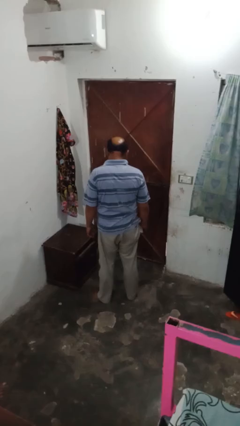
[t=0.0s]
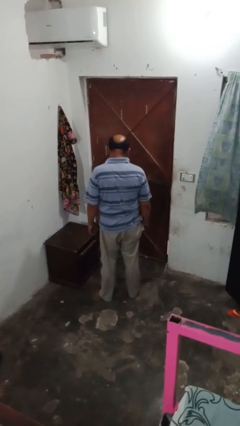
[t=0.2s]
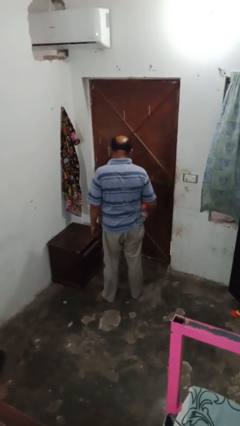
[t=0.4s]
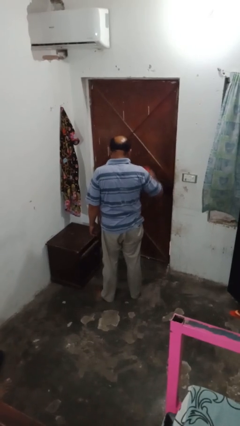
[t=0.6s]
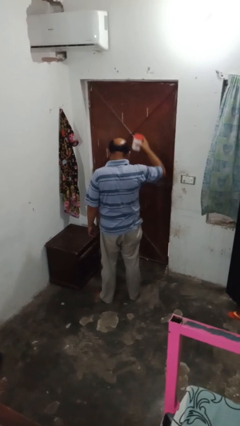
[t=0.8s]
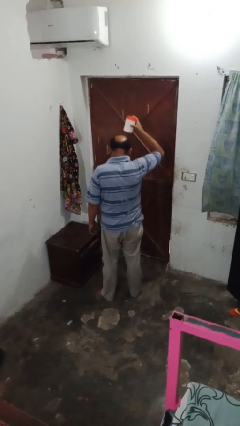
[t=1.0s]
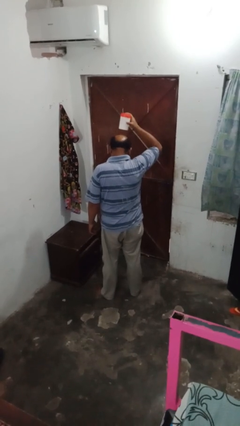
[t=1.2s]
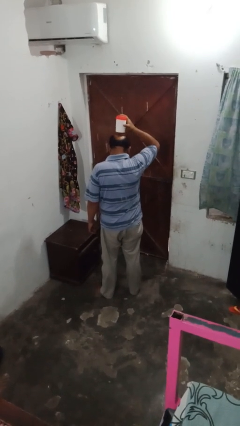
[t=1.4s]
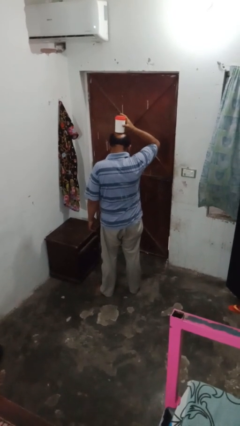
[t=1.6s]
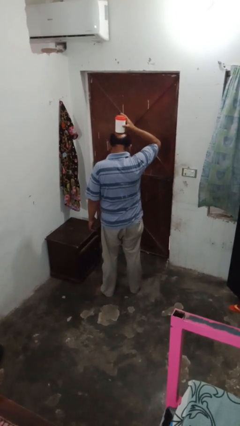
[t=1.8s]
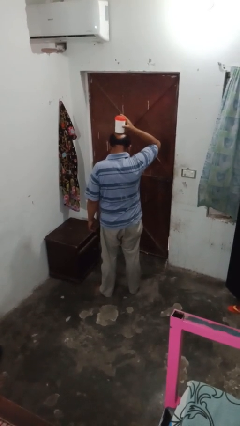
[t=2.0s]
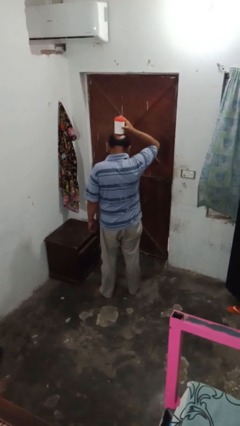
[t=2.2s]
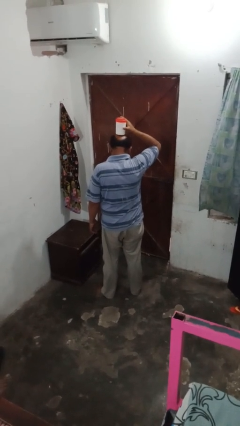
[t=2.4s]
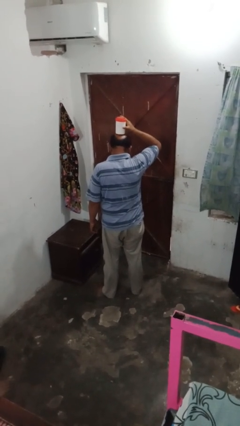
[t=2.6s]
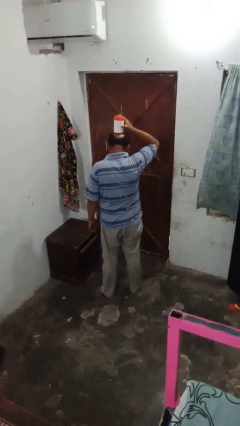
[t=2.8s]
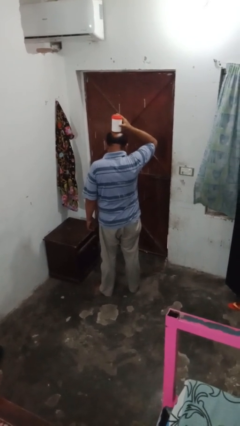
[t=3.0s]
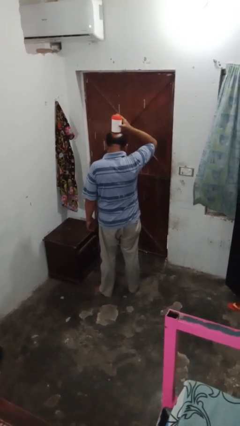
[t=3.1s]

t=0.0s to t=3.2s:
person holds object above head

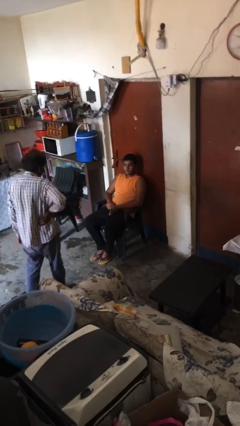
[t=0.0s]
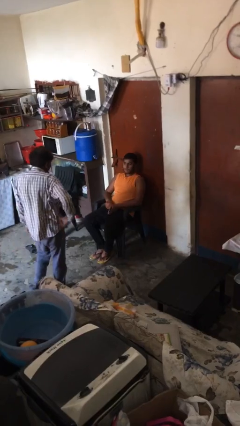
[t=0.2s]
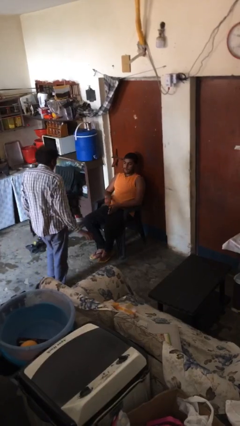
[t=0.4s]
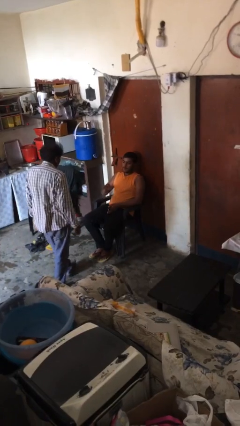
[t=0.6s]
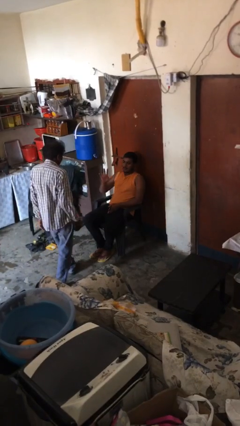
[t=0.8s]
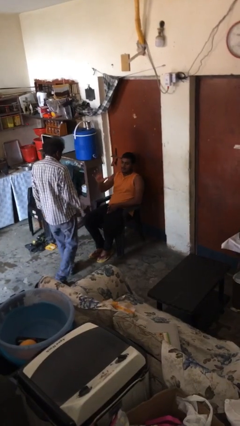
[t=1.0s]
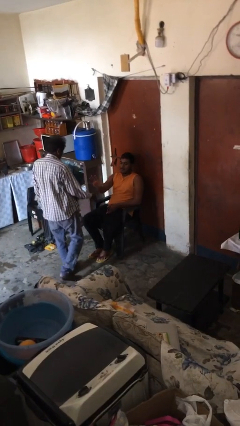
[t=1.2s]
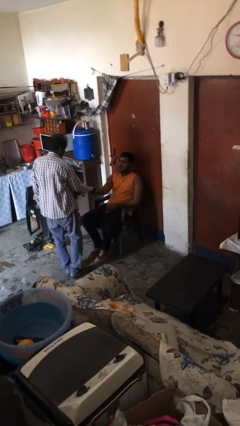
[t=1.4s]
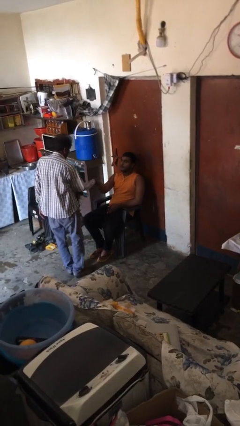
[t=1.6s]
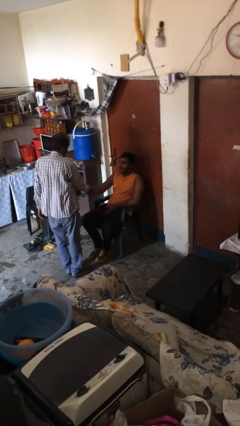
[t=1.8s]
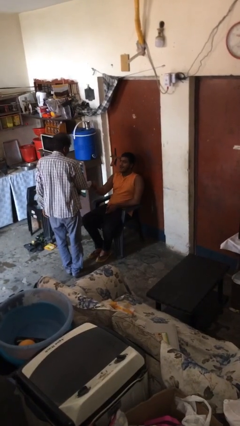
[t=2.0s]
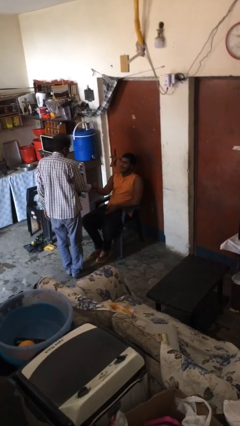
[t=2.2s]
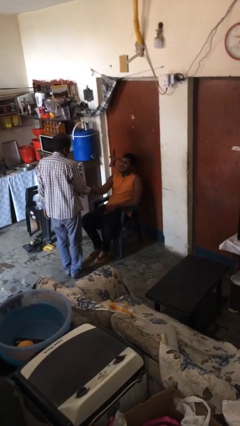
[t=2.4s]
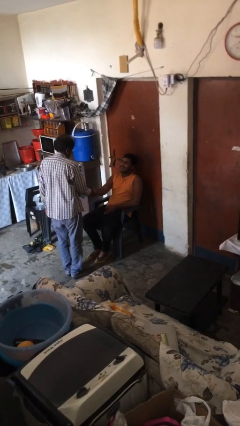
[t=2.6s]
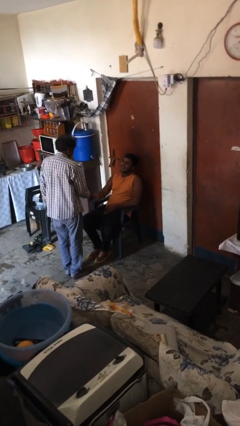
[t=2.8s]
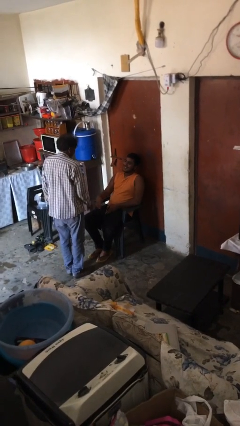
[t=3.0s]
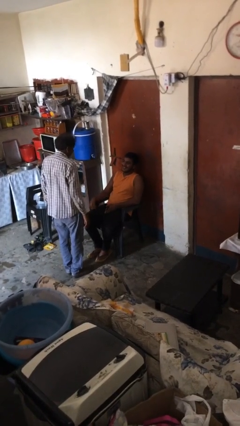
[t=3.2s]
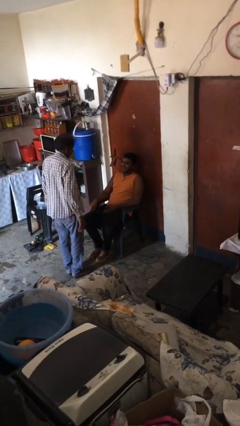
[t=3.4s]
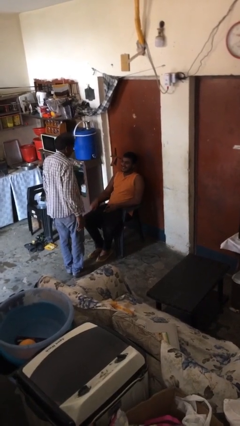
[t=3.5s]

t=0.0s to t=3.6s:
person shakes hand

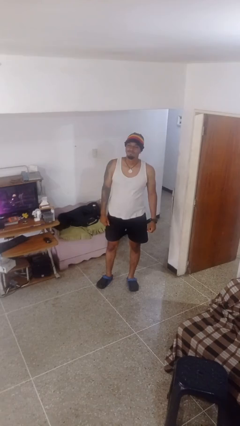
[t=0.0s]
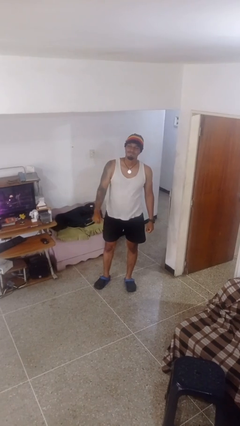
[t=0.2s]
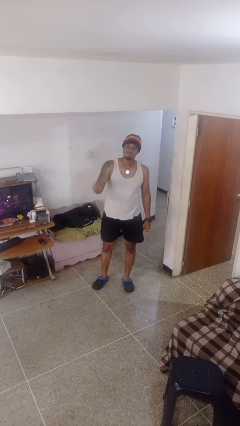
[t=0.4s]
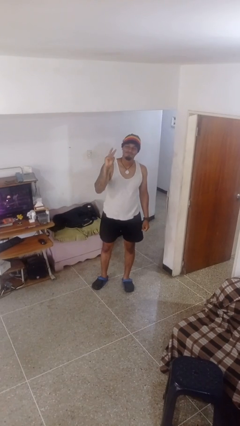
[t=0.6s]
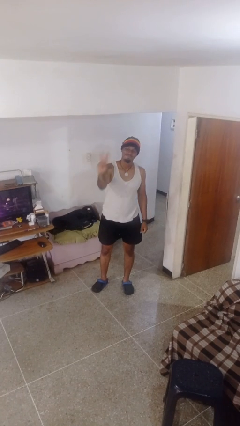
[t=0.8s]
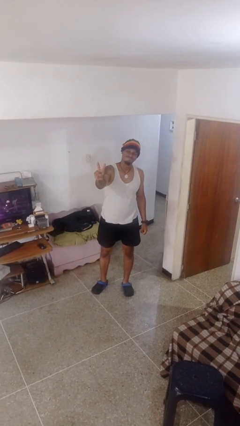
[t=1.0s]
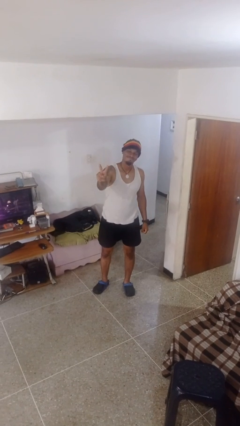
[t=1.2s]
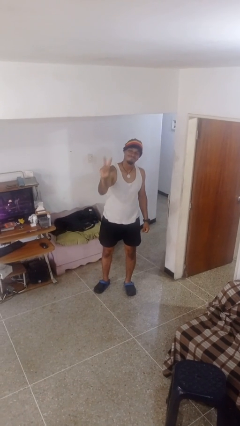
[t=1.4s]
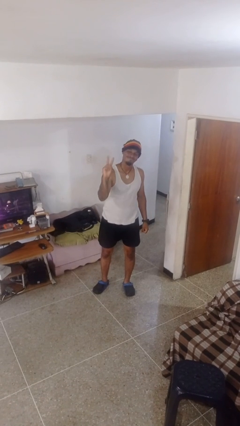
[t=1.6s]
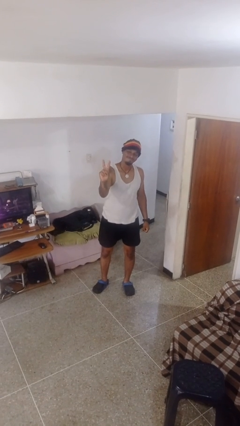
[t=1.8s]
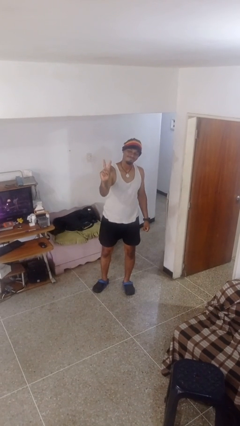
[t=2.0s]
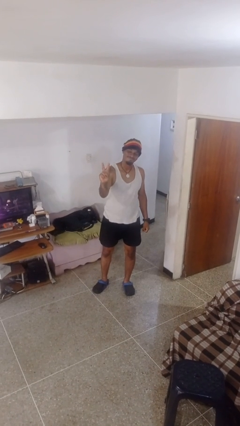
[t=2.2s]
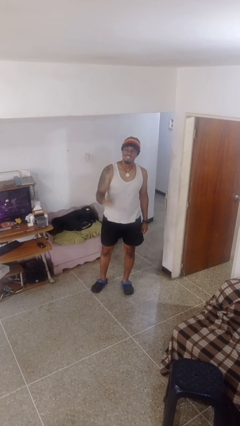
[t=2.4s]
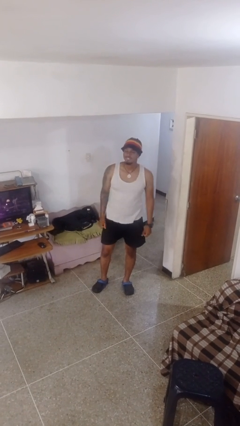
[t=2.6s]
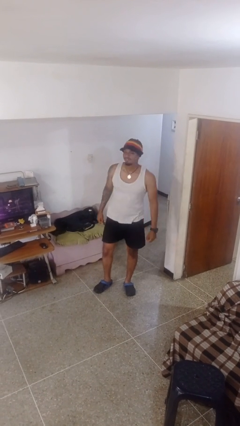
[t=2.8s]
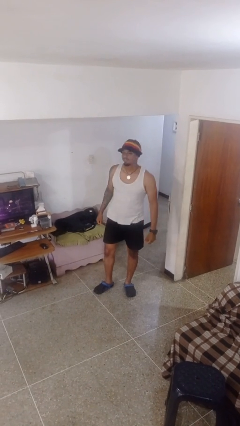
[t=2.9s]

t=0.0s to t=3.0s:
person gestures peace

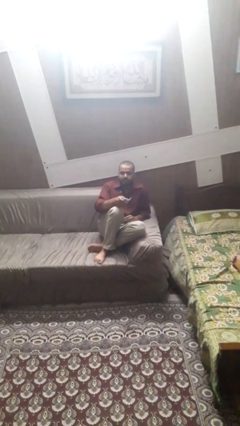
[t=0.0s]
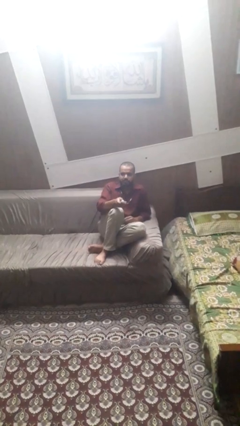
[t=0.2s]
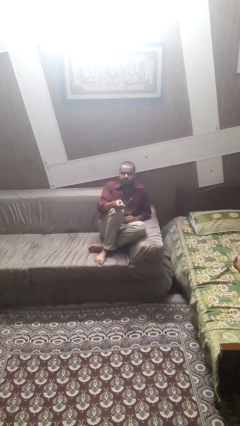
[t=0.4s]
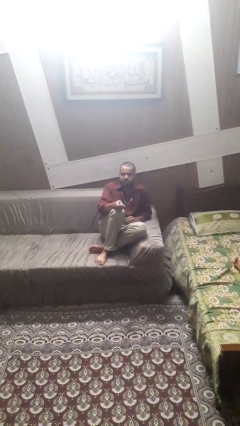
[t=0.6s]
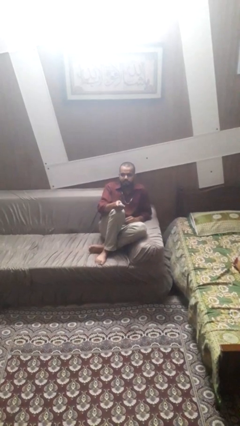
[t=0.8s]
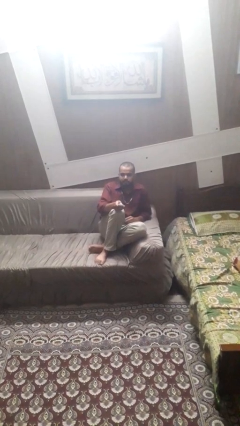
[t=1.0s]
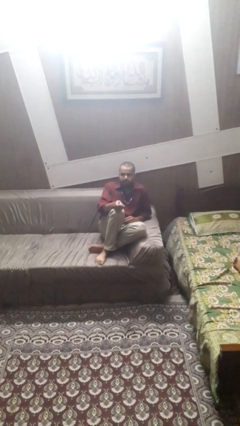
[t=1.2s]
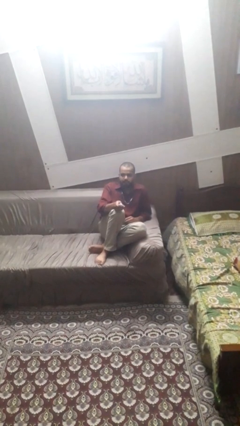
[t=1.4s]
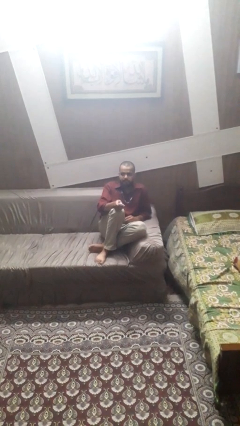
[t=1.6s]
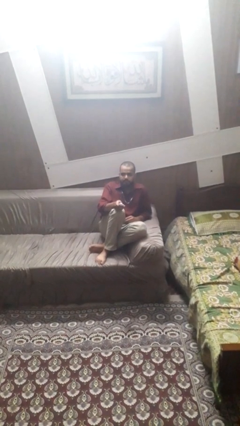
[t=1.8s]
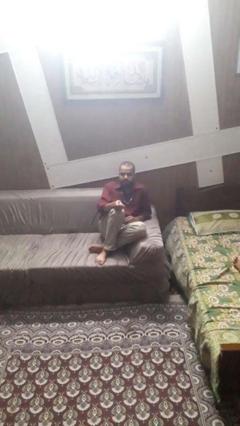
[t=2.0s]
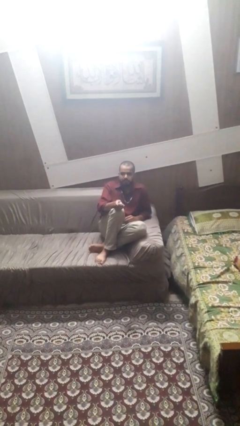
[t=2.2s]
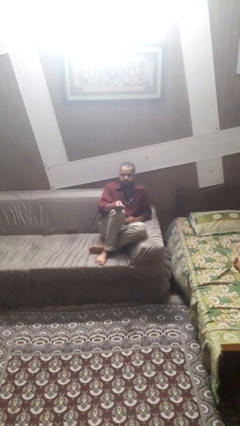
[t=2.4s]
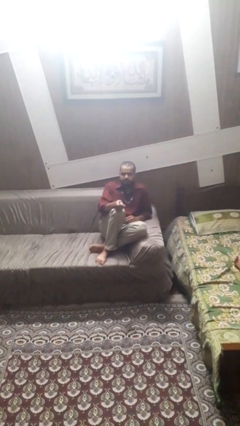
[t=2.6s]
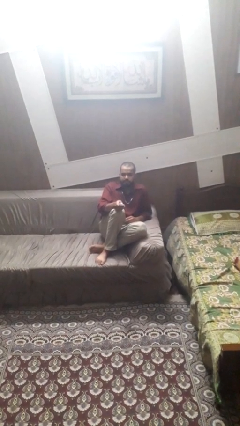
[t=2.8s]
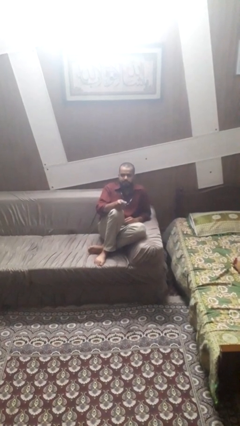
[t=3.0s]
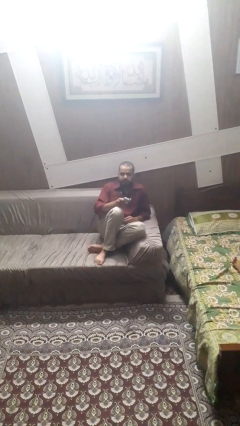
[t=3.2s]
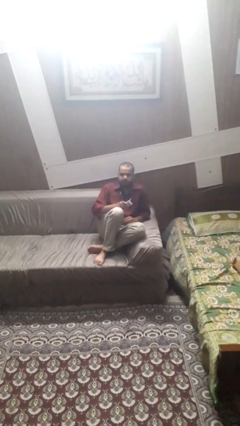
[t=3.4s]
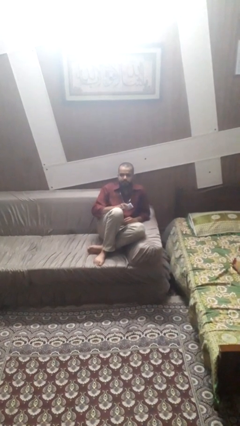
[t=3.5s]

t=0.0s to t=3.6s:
person uses television remote

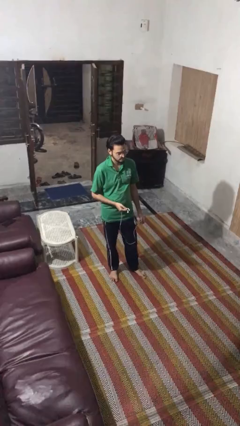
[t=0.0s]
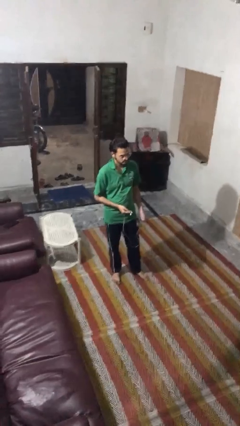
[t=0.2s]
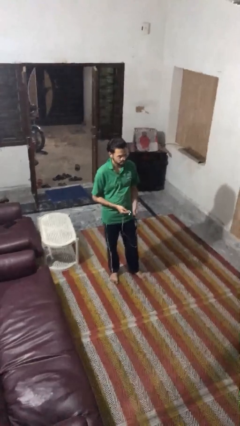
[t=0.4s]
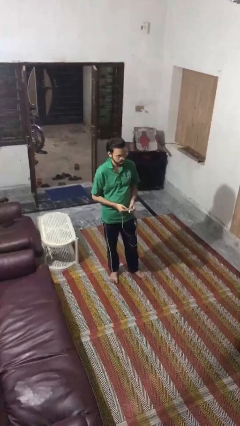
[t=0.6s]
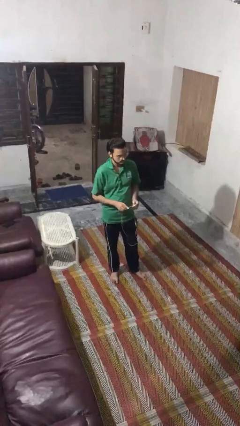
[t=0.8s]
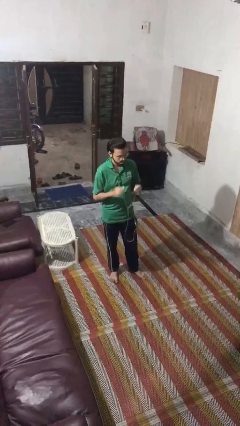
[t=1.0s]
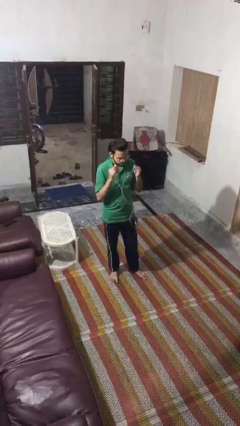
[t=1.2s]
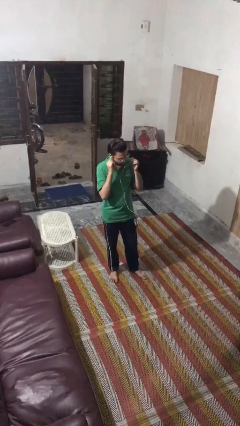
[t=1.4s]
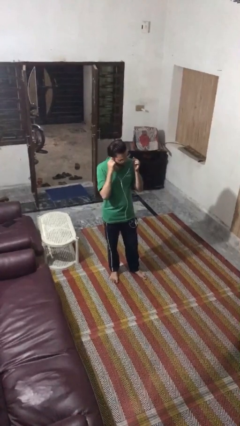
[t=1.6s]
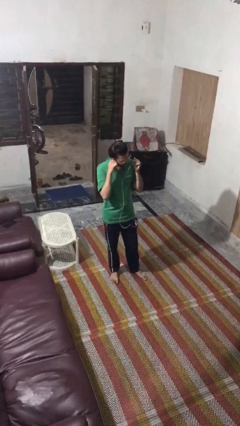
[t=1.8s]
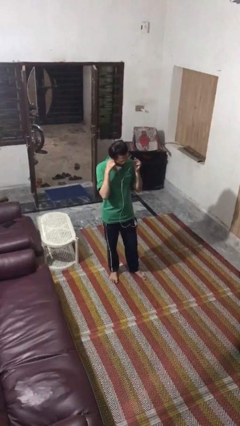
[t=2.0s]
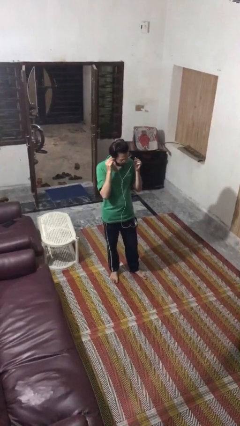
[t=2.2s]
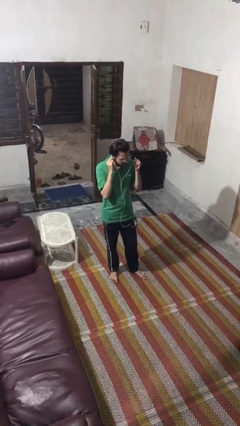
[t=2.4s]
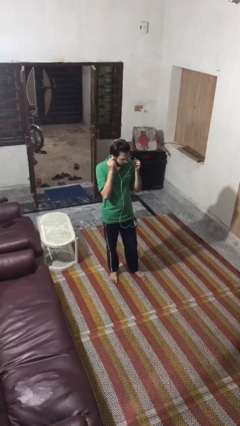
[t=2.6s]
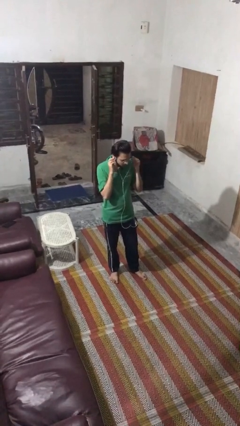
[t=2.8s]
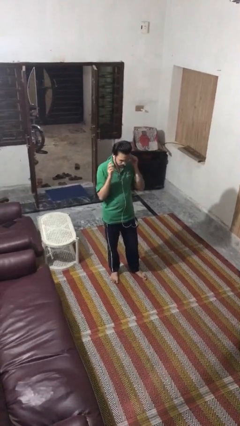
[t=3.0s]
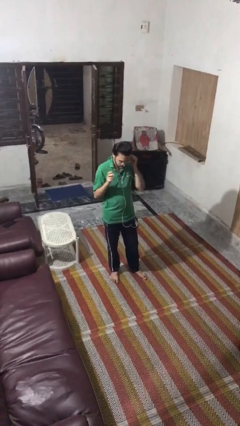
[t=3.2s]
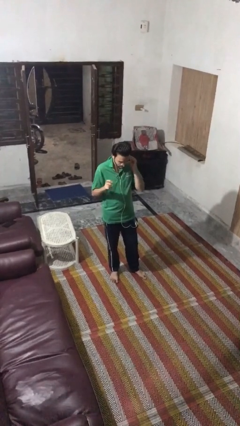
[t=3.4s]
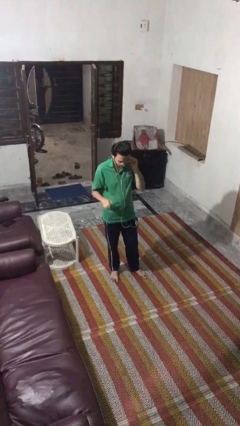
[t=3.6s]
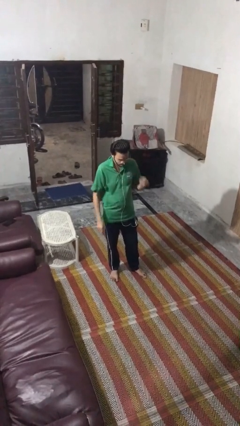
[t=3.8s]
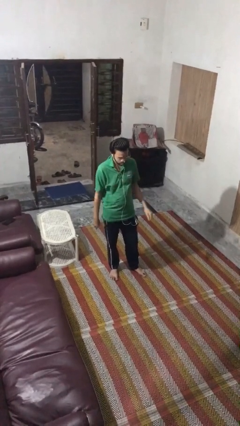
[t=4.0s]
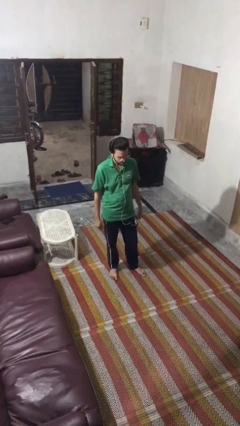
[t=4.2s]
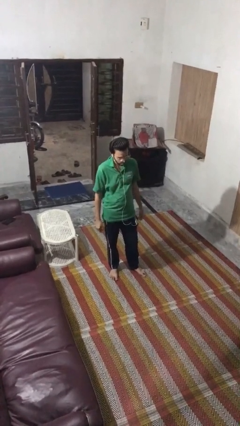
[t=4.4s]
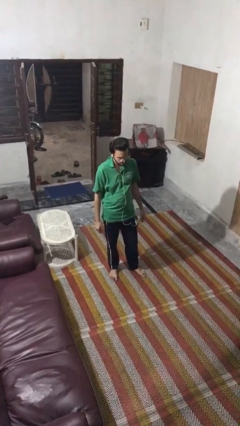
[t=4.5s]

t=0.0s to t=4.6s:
person puts on headphones
